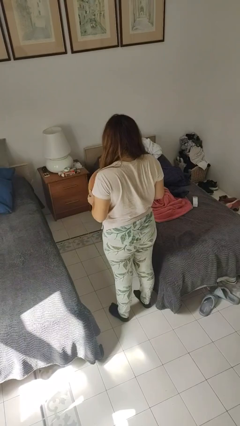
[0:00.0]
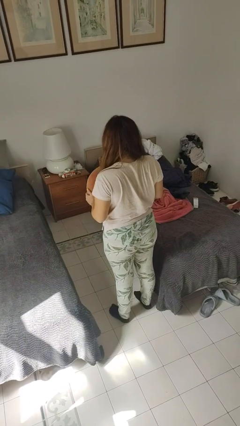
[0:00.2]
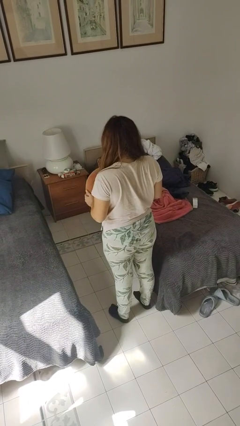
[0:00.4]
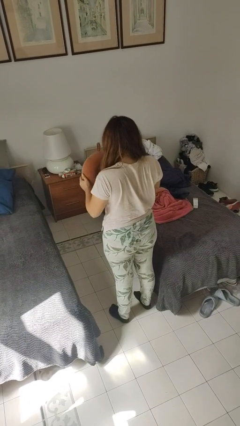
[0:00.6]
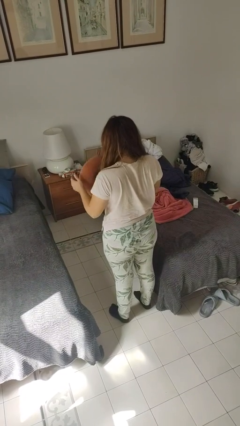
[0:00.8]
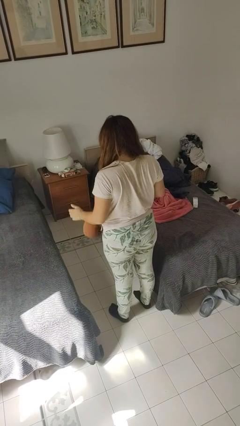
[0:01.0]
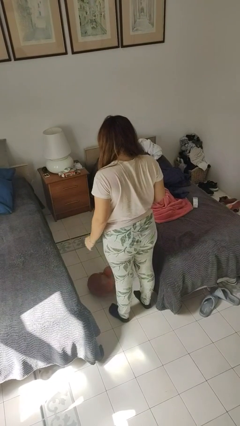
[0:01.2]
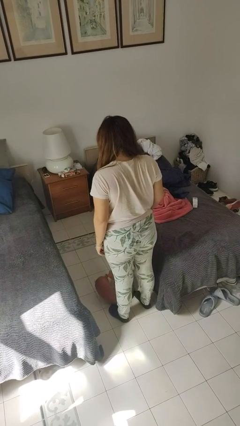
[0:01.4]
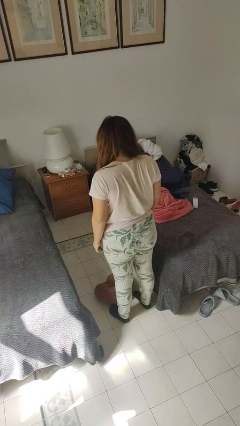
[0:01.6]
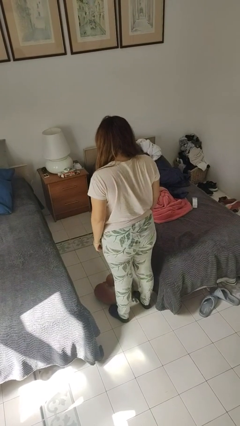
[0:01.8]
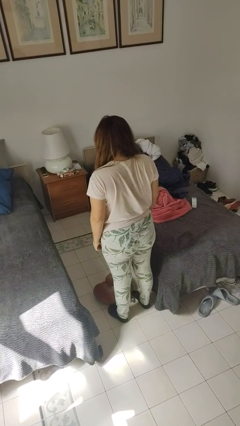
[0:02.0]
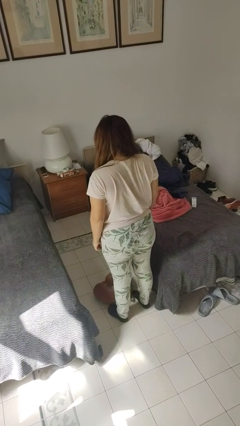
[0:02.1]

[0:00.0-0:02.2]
person throws object into air

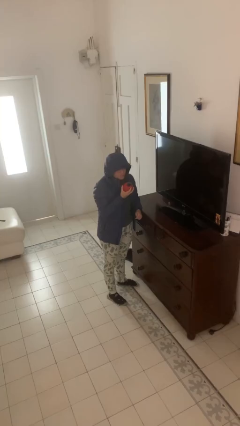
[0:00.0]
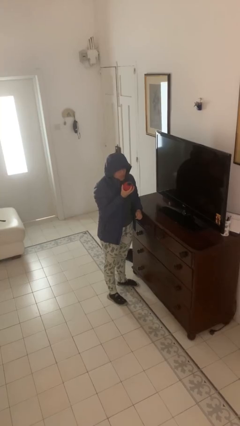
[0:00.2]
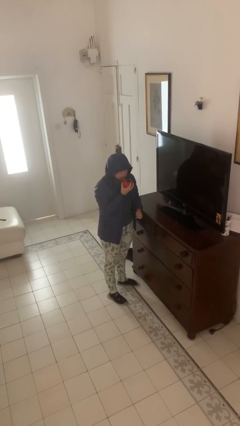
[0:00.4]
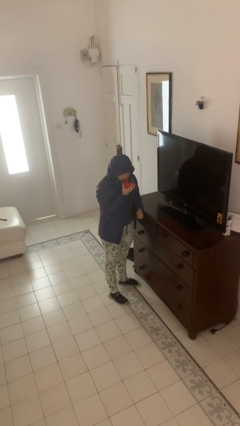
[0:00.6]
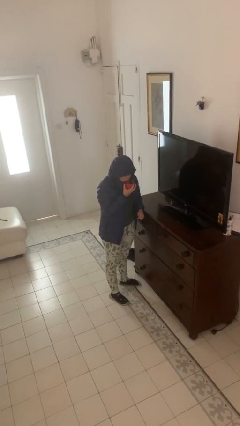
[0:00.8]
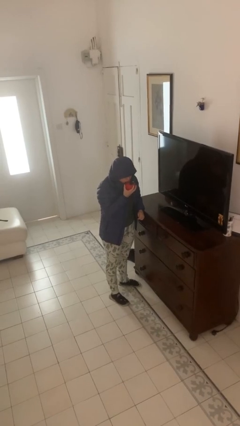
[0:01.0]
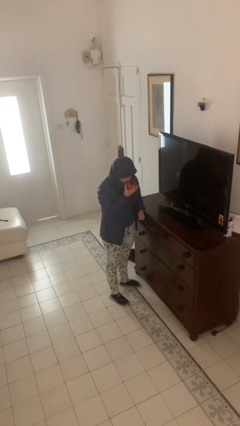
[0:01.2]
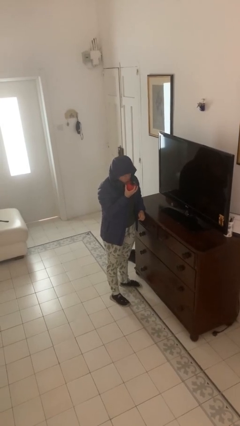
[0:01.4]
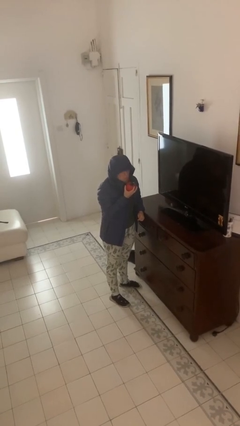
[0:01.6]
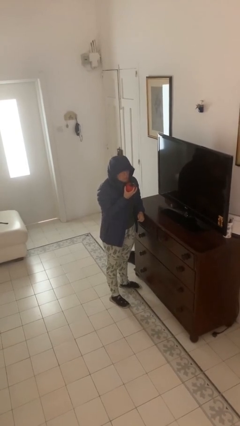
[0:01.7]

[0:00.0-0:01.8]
person eats apple

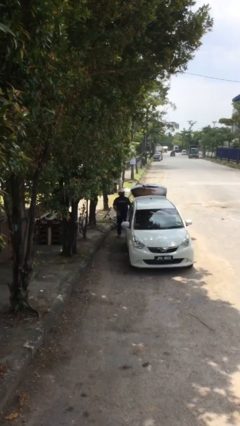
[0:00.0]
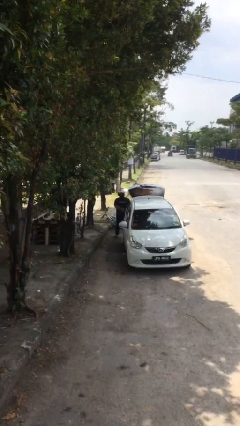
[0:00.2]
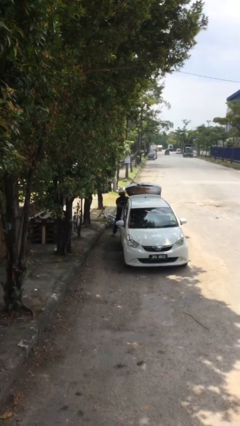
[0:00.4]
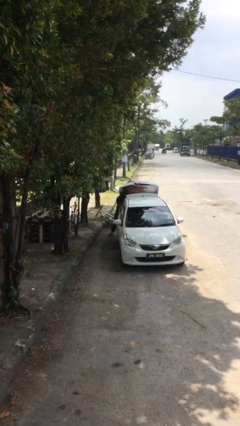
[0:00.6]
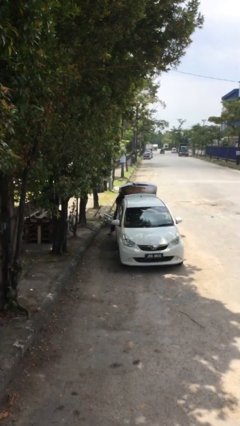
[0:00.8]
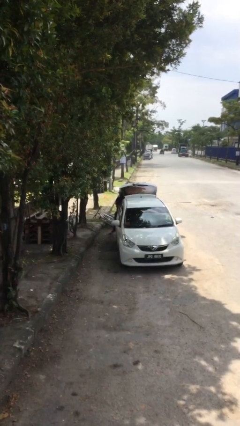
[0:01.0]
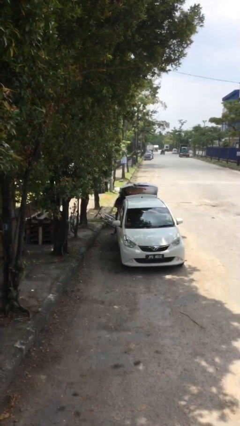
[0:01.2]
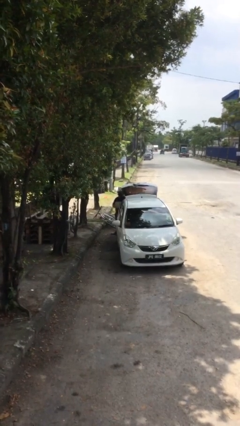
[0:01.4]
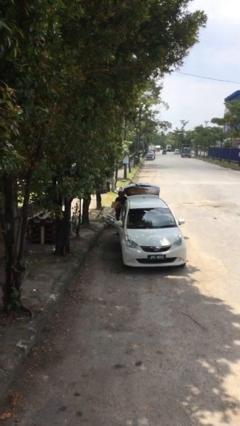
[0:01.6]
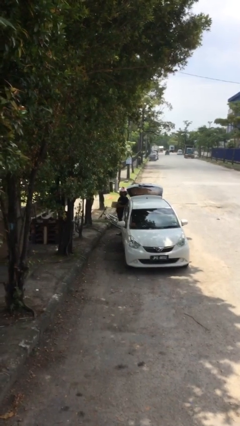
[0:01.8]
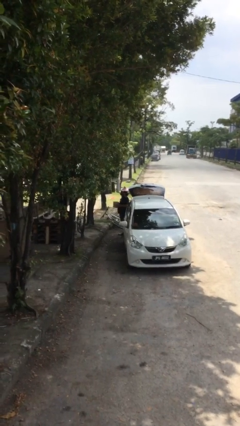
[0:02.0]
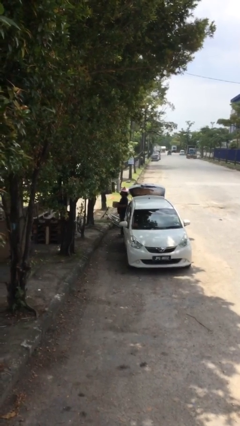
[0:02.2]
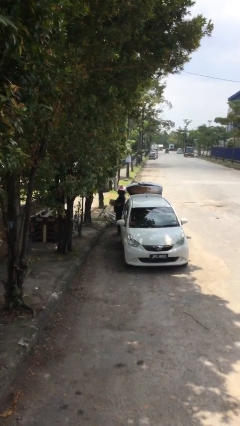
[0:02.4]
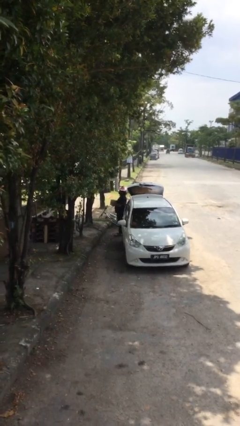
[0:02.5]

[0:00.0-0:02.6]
person unloads car

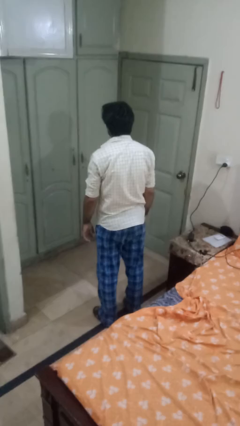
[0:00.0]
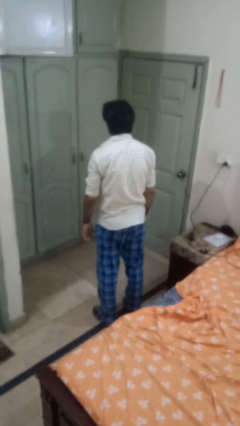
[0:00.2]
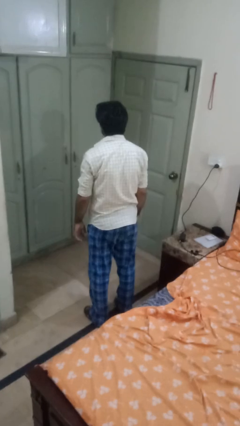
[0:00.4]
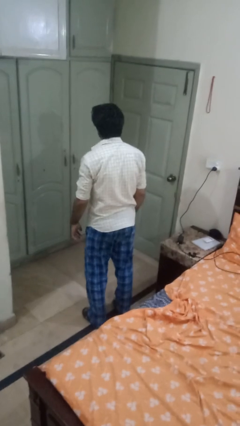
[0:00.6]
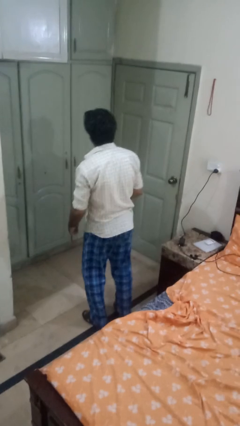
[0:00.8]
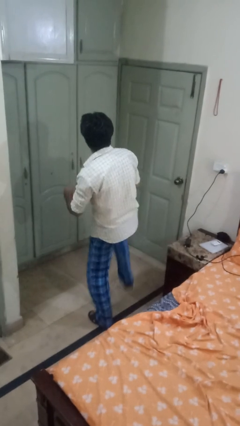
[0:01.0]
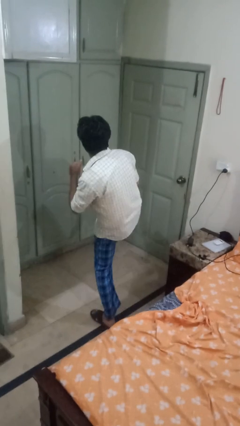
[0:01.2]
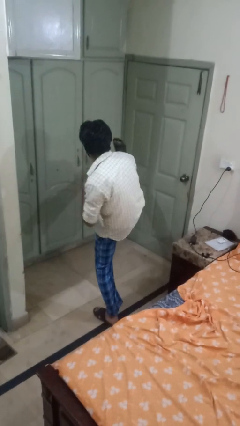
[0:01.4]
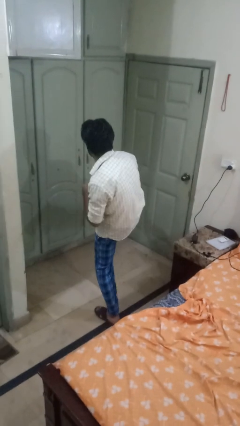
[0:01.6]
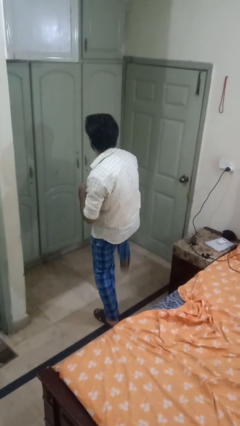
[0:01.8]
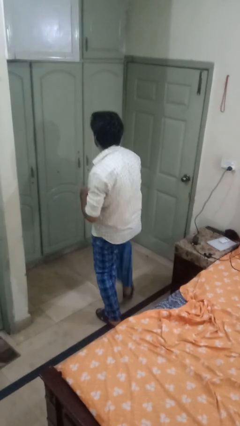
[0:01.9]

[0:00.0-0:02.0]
person karate kicks

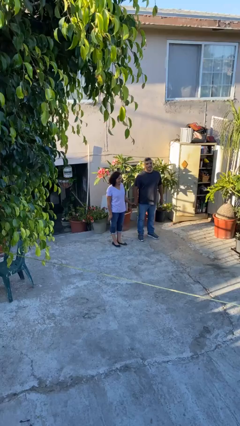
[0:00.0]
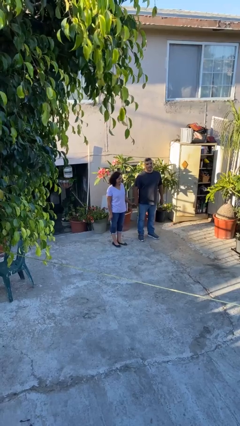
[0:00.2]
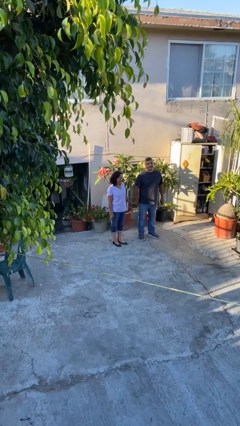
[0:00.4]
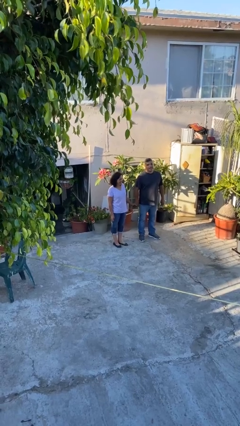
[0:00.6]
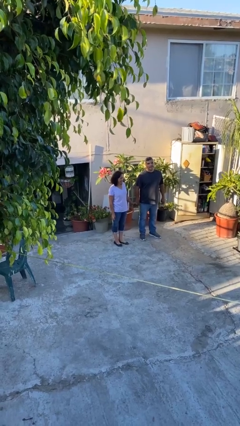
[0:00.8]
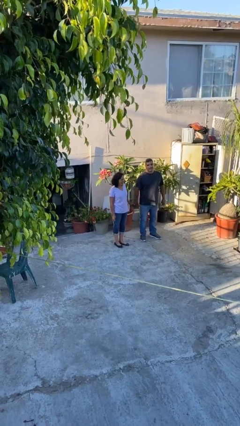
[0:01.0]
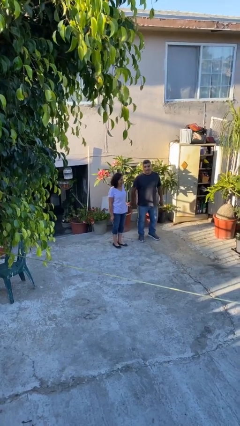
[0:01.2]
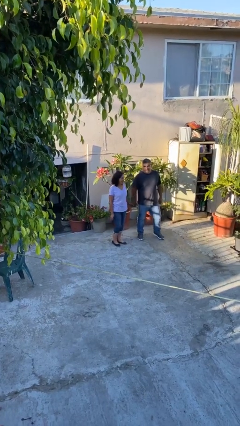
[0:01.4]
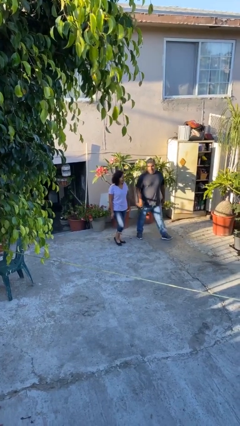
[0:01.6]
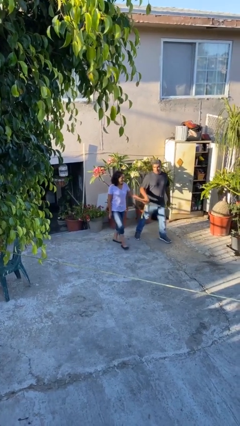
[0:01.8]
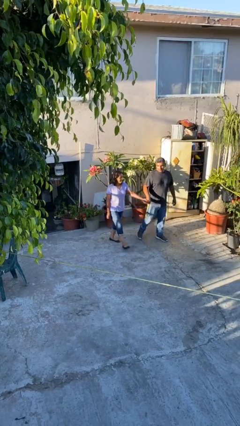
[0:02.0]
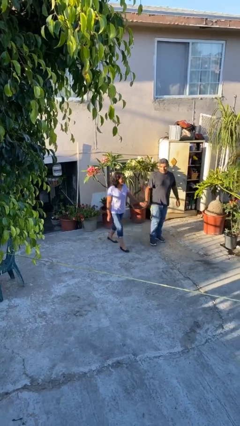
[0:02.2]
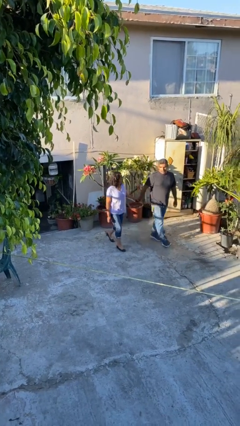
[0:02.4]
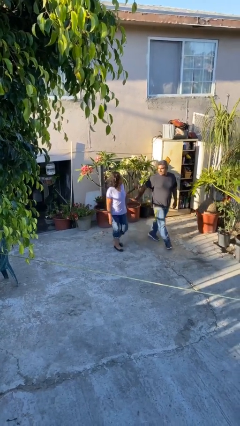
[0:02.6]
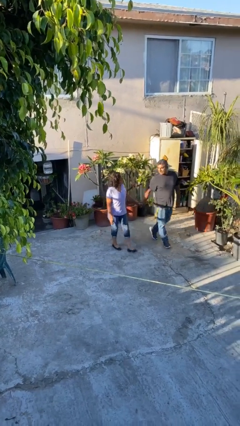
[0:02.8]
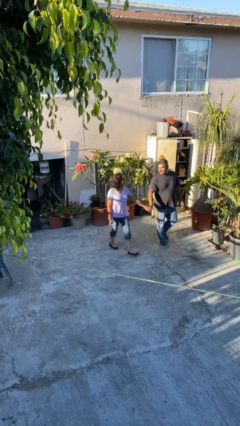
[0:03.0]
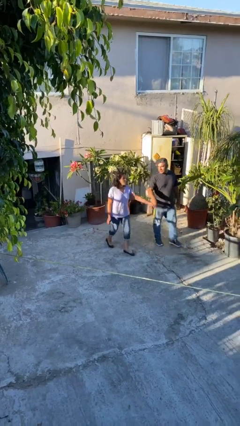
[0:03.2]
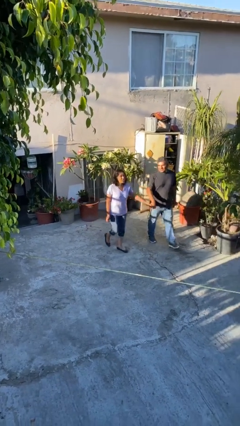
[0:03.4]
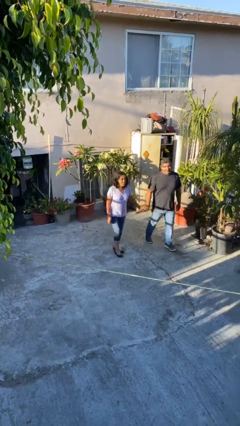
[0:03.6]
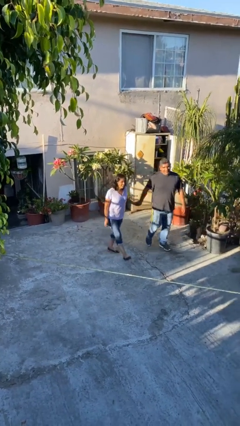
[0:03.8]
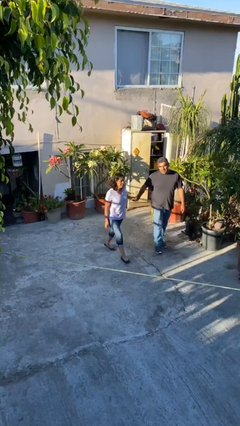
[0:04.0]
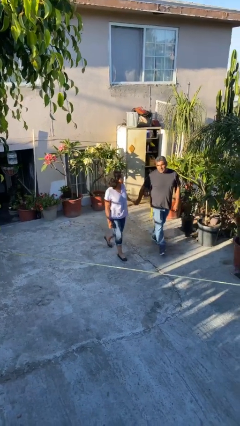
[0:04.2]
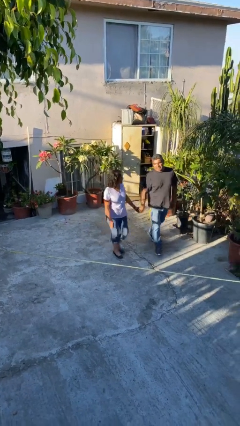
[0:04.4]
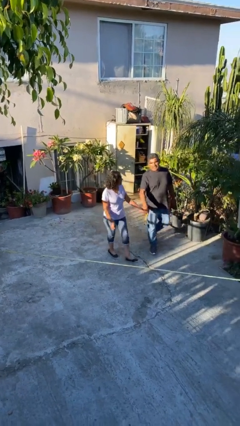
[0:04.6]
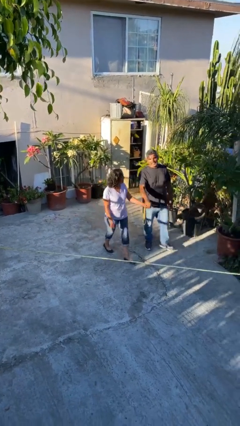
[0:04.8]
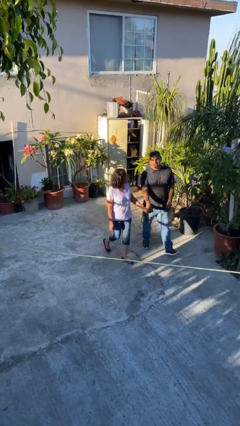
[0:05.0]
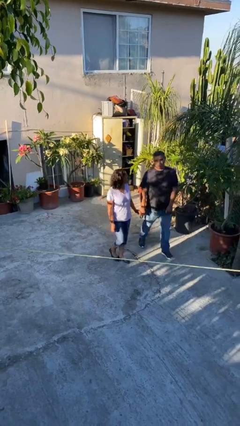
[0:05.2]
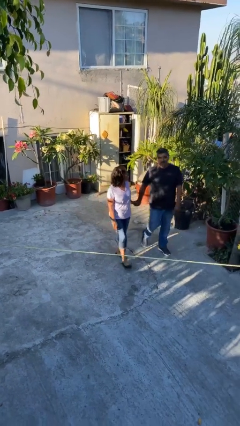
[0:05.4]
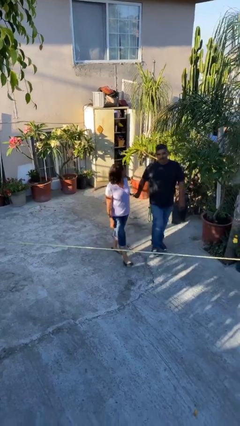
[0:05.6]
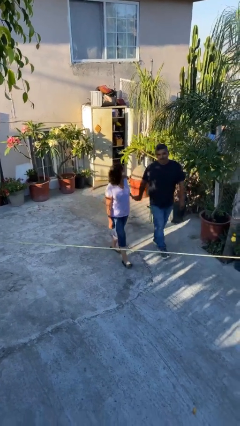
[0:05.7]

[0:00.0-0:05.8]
person holds hand

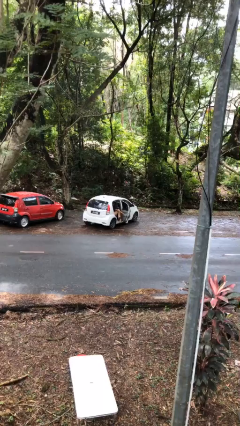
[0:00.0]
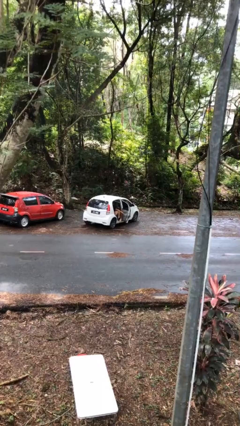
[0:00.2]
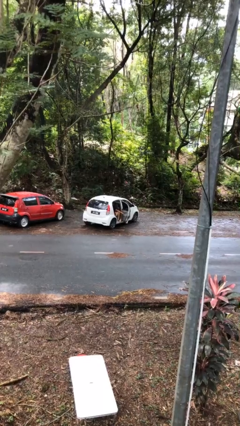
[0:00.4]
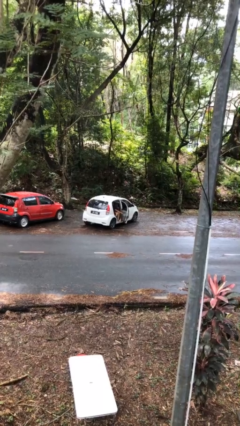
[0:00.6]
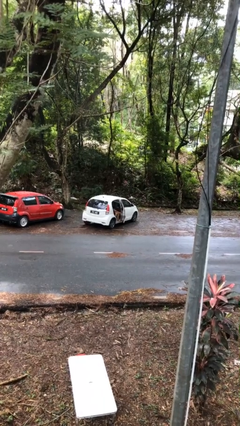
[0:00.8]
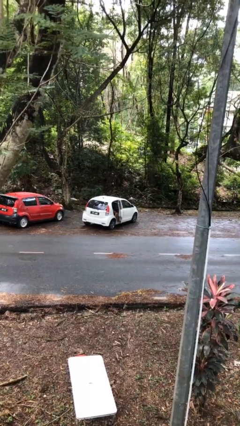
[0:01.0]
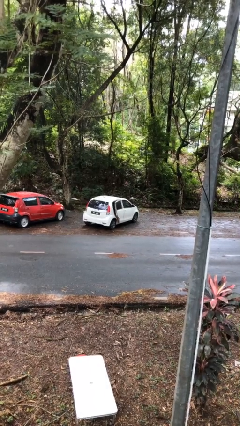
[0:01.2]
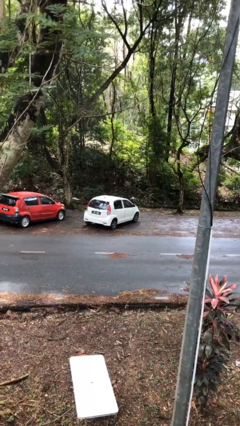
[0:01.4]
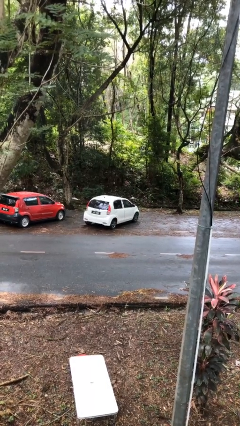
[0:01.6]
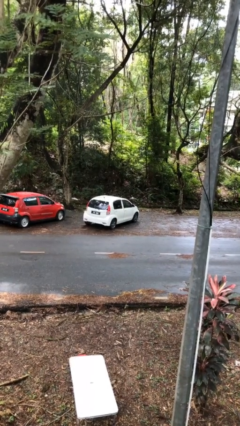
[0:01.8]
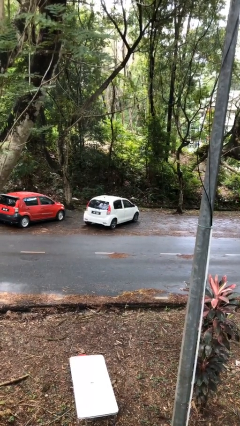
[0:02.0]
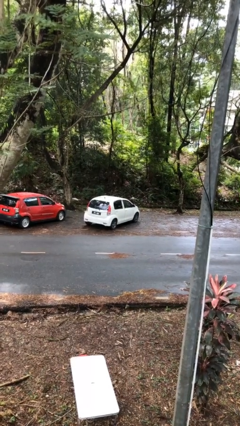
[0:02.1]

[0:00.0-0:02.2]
person closes car door

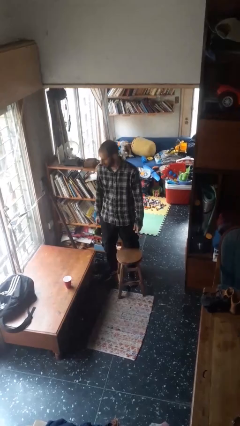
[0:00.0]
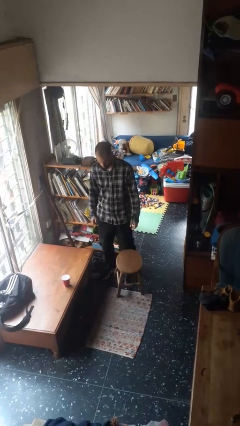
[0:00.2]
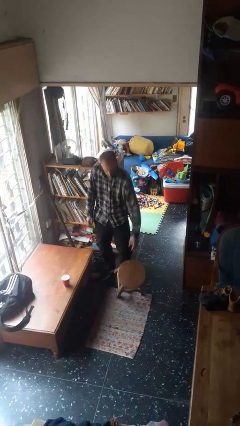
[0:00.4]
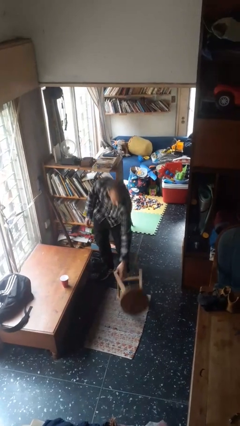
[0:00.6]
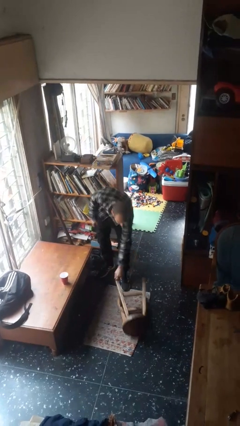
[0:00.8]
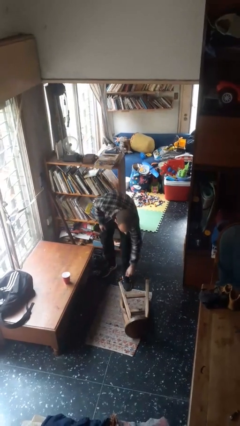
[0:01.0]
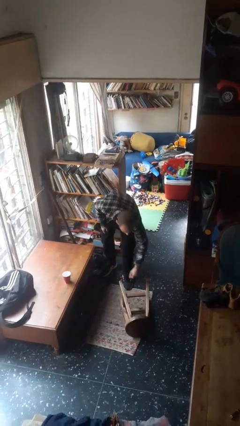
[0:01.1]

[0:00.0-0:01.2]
person knocks over furniture
